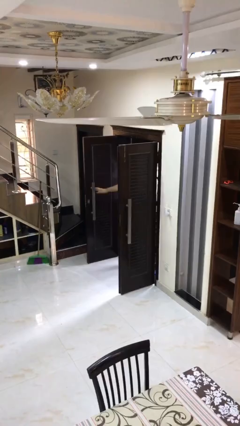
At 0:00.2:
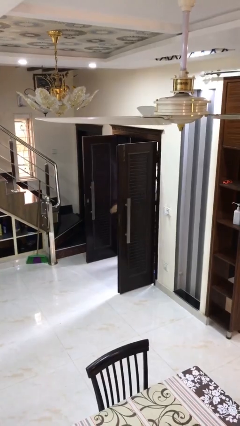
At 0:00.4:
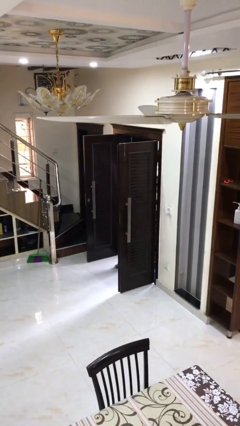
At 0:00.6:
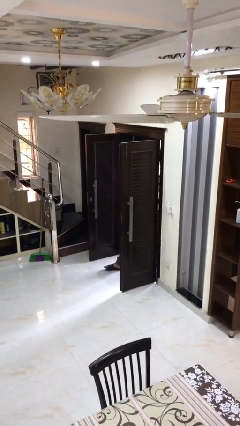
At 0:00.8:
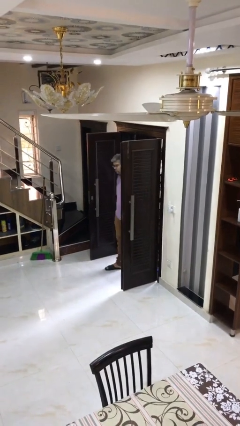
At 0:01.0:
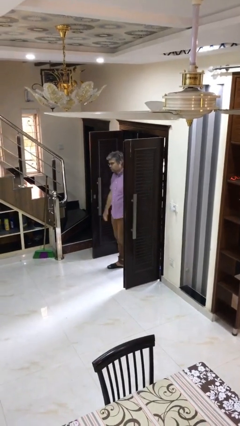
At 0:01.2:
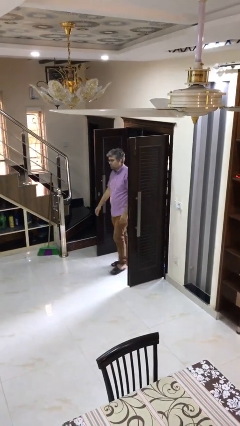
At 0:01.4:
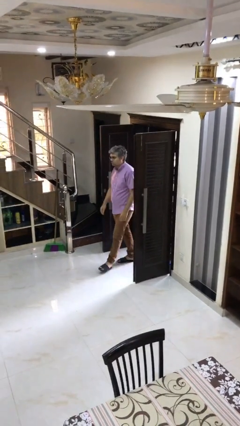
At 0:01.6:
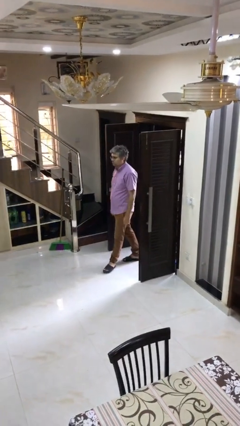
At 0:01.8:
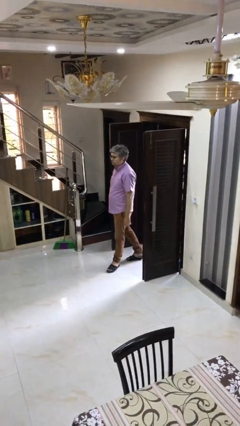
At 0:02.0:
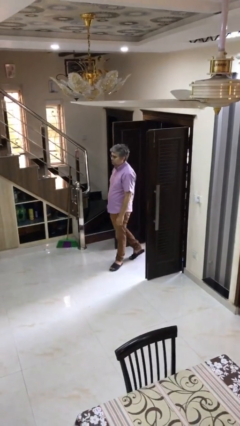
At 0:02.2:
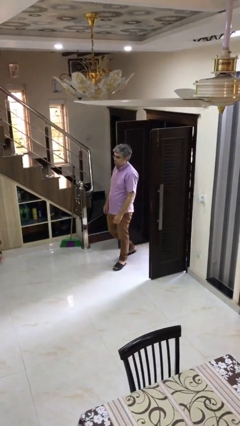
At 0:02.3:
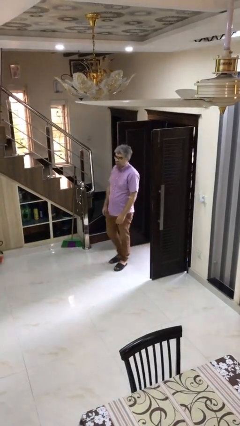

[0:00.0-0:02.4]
person enters scene through structure

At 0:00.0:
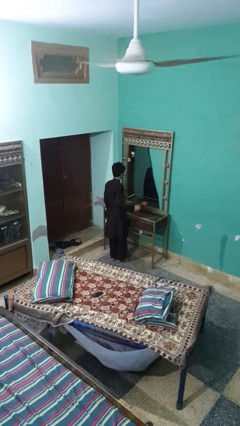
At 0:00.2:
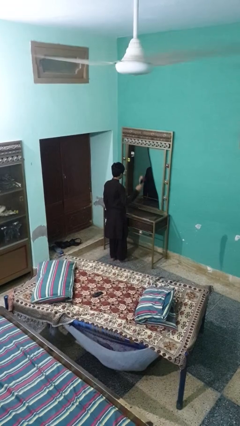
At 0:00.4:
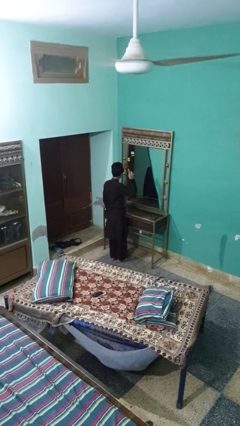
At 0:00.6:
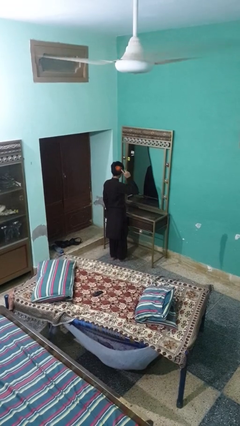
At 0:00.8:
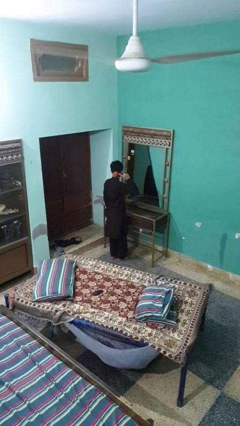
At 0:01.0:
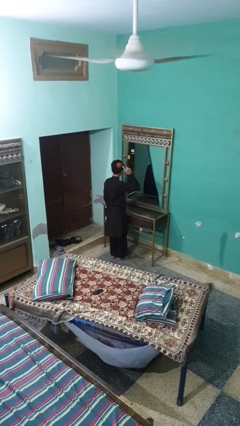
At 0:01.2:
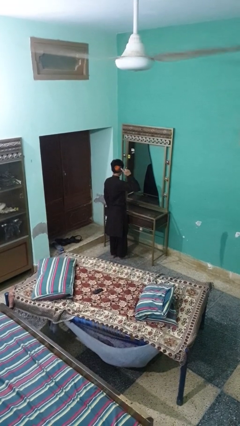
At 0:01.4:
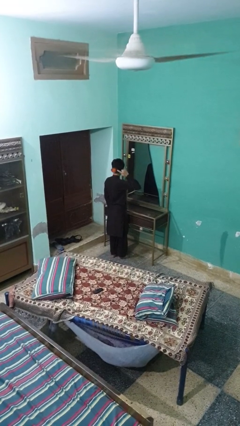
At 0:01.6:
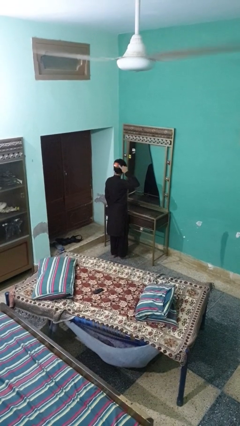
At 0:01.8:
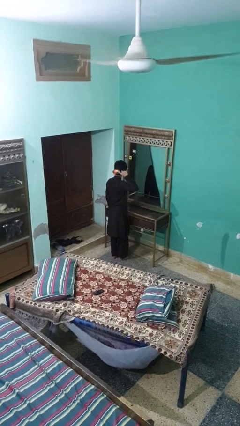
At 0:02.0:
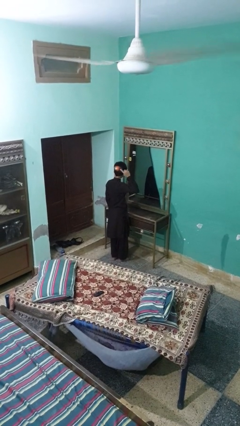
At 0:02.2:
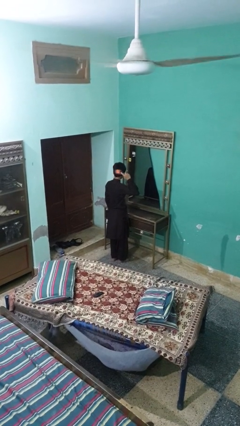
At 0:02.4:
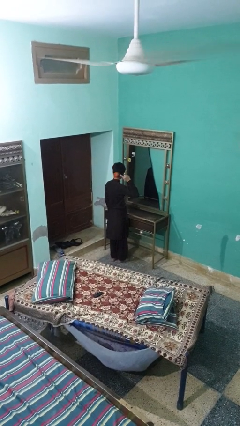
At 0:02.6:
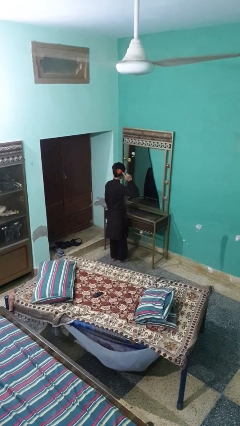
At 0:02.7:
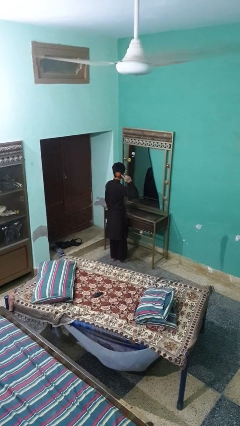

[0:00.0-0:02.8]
person brushes hair

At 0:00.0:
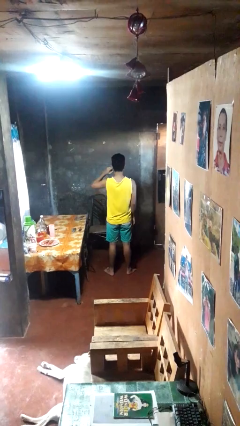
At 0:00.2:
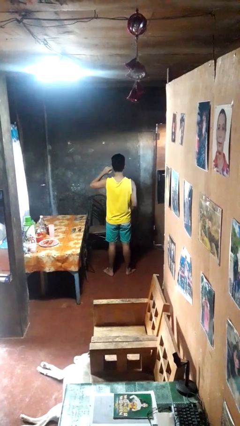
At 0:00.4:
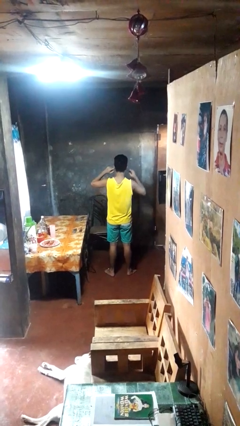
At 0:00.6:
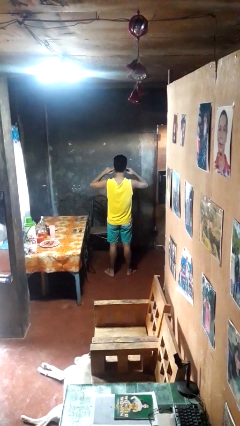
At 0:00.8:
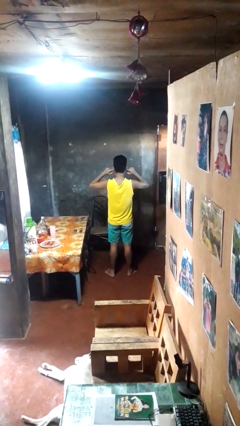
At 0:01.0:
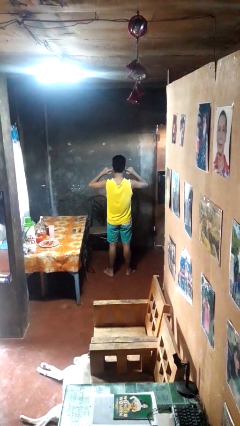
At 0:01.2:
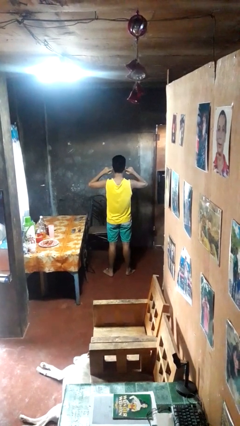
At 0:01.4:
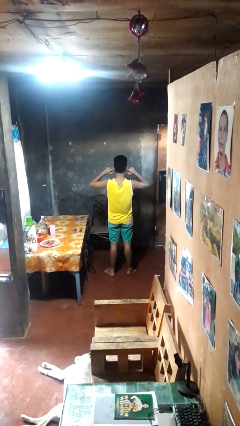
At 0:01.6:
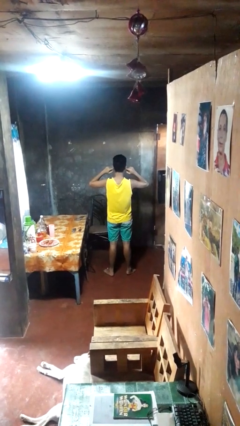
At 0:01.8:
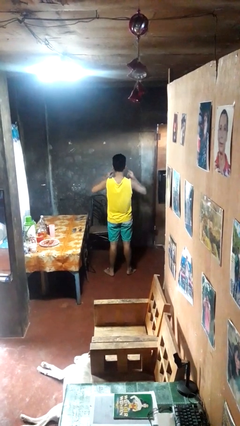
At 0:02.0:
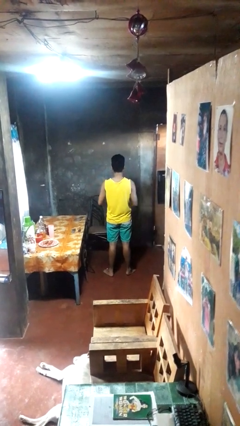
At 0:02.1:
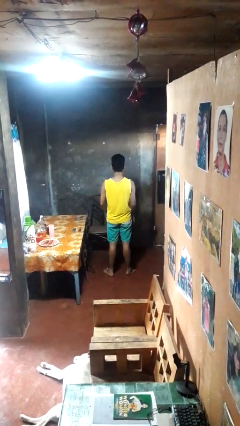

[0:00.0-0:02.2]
person puts fingers in ear

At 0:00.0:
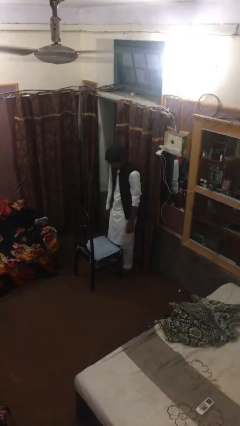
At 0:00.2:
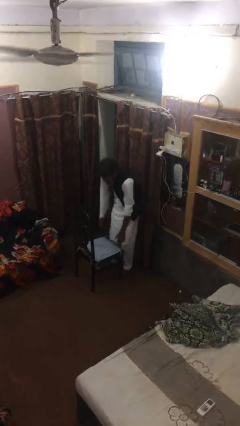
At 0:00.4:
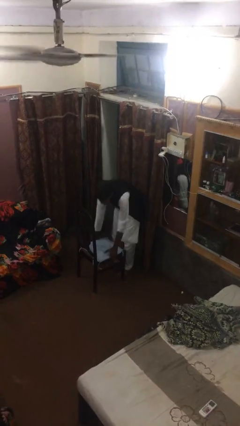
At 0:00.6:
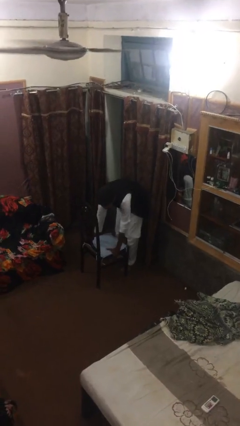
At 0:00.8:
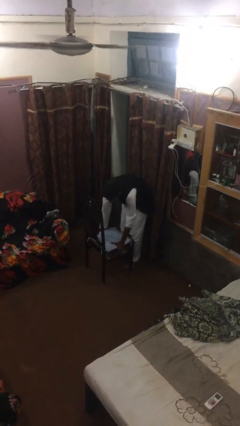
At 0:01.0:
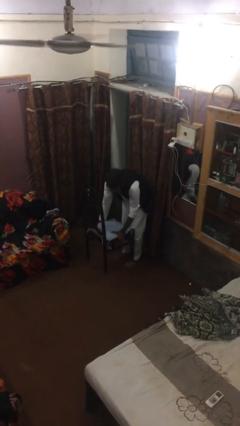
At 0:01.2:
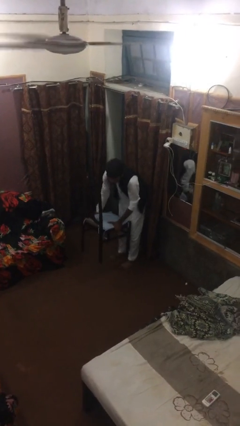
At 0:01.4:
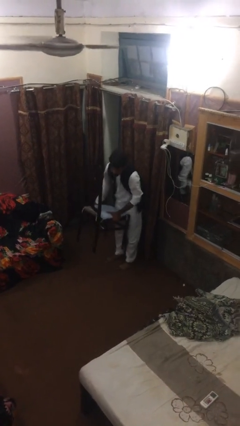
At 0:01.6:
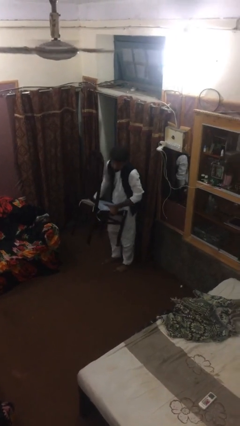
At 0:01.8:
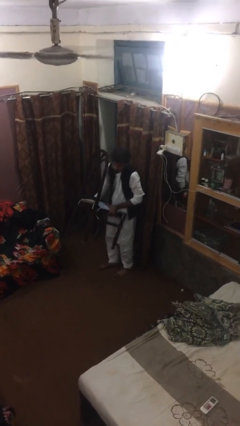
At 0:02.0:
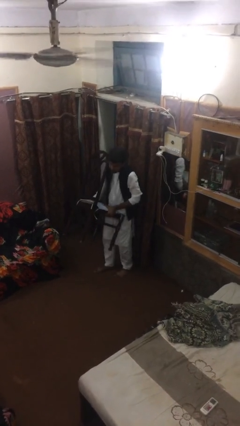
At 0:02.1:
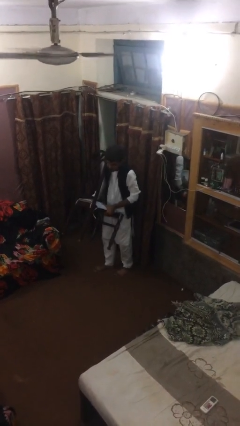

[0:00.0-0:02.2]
person picks up object from floor

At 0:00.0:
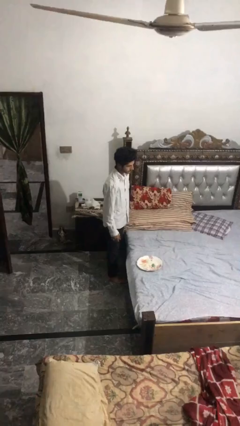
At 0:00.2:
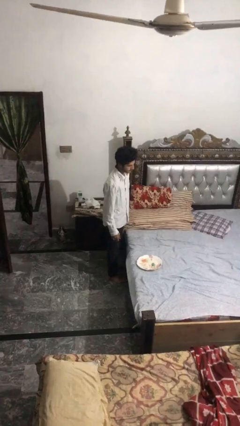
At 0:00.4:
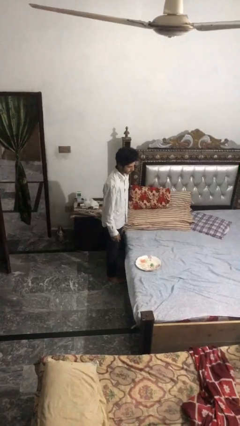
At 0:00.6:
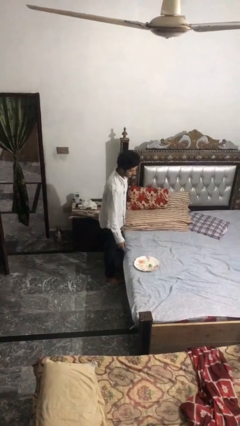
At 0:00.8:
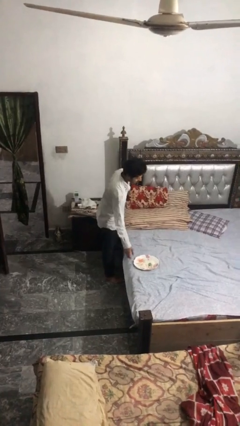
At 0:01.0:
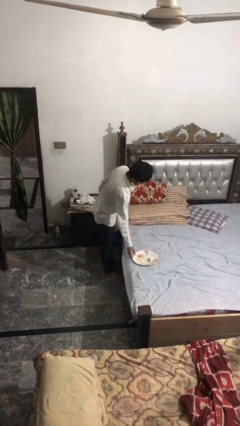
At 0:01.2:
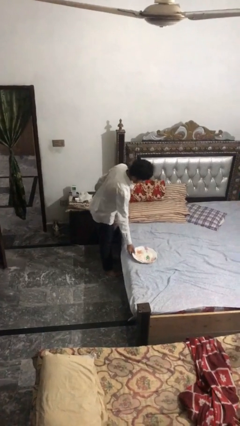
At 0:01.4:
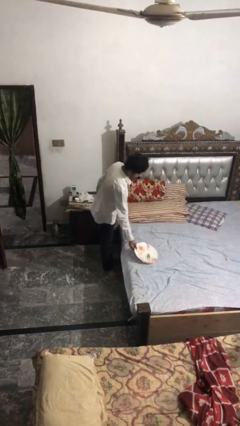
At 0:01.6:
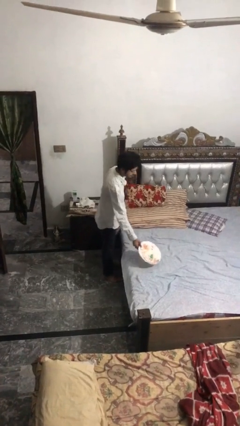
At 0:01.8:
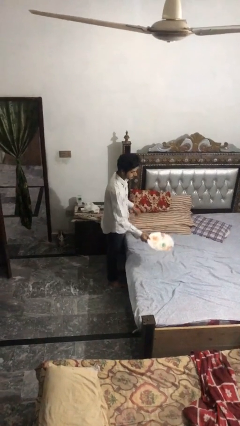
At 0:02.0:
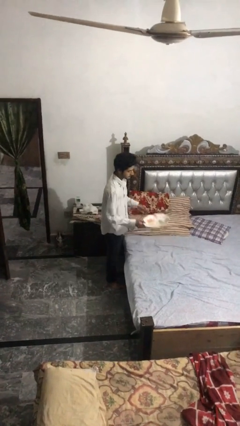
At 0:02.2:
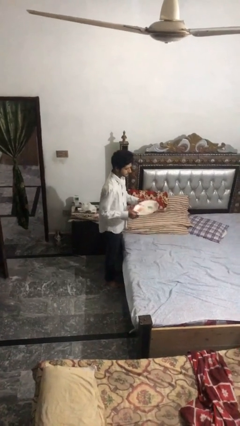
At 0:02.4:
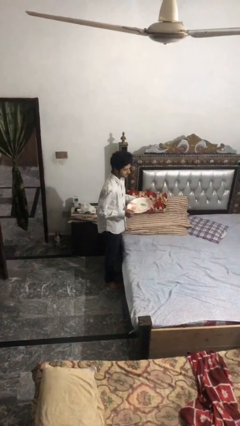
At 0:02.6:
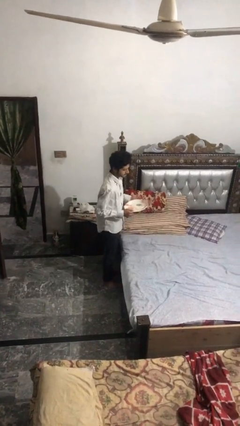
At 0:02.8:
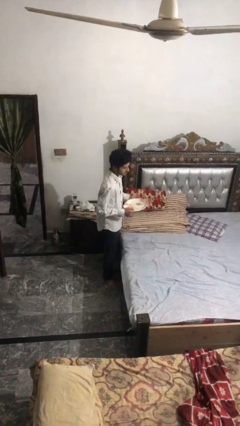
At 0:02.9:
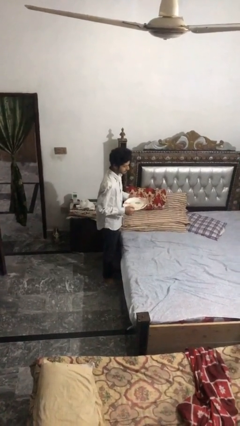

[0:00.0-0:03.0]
person picks up object from bed

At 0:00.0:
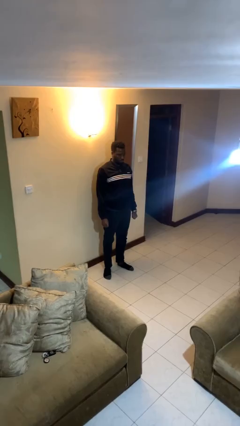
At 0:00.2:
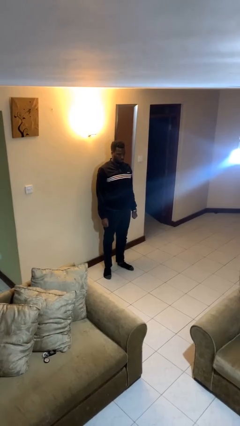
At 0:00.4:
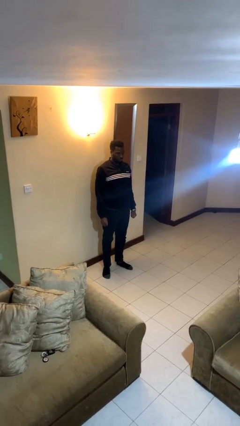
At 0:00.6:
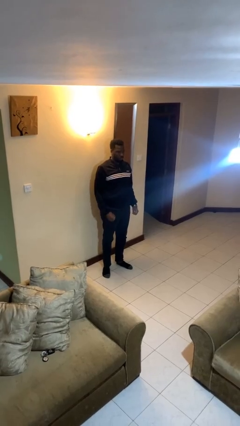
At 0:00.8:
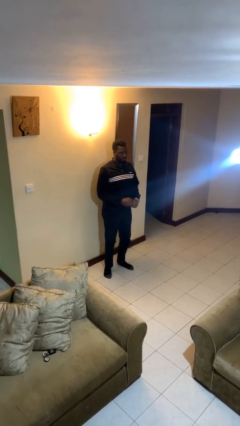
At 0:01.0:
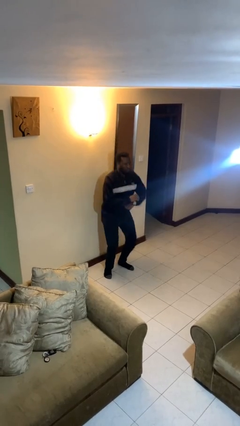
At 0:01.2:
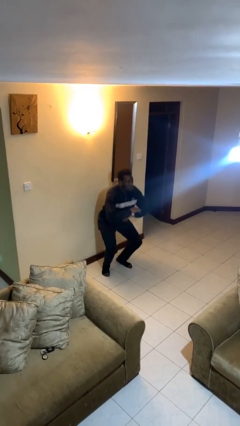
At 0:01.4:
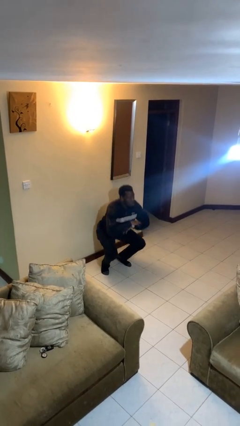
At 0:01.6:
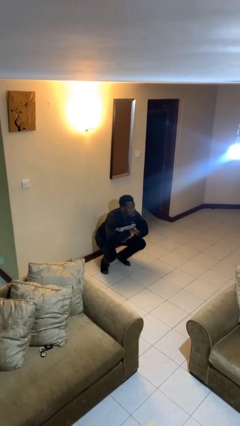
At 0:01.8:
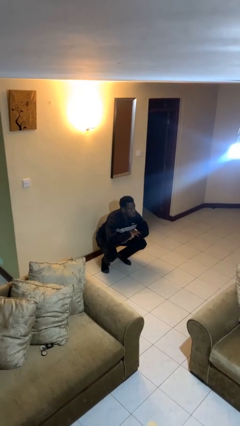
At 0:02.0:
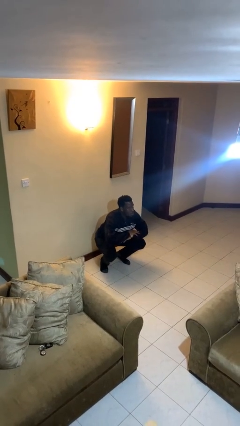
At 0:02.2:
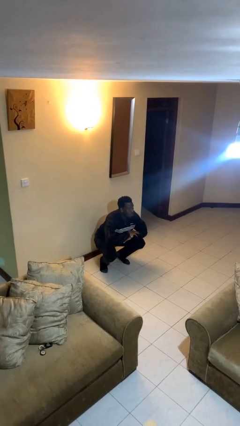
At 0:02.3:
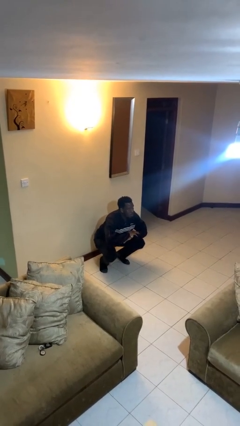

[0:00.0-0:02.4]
person squats

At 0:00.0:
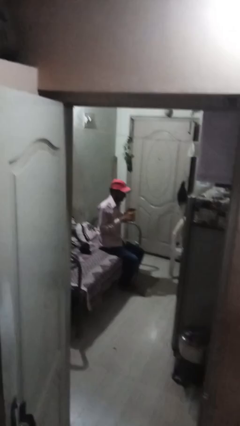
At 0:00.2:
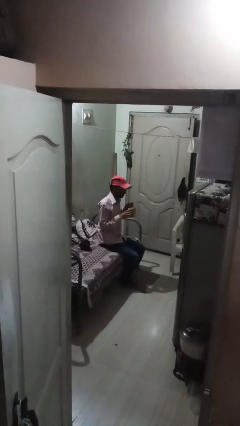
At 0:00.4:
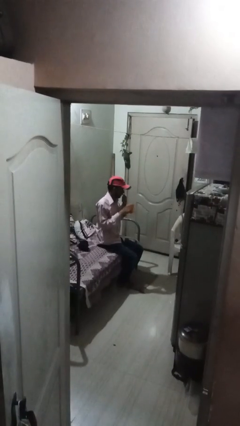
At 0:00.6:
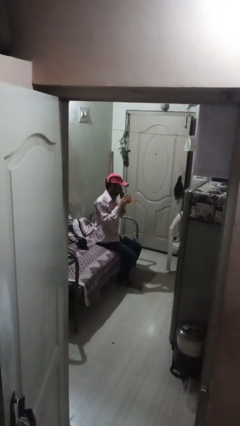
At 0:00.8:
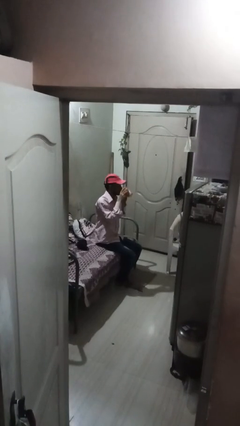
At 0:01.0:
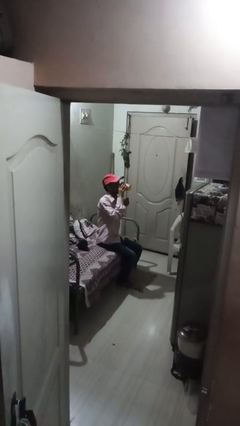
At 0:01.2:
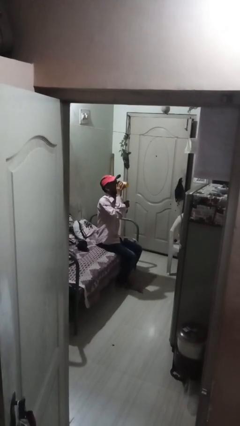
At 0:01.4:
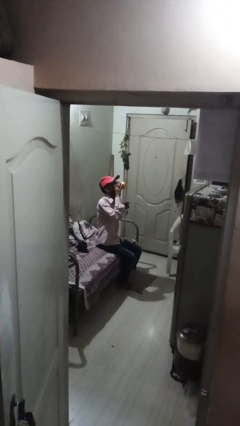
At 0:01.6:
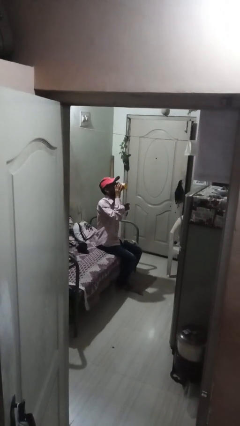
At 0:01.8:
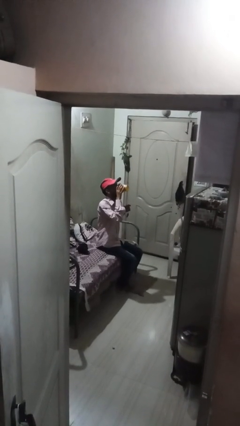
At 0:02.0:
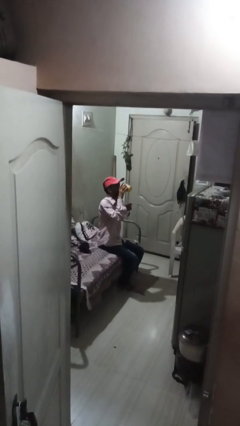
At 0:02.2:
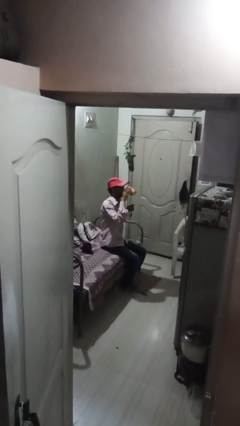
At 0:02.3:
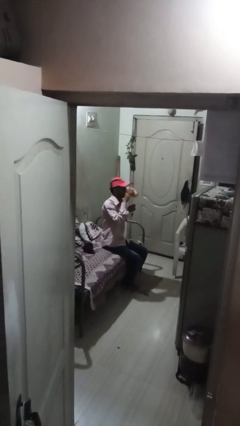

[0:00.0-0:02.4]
person drinks from mug
